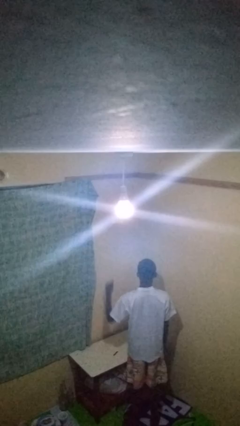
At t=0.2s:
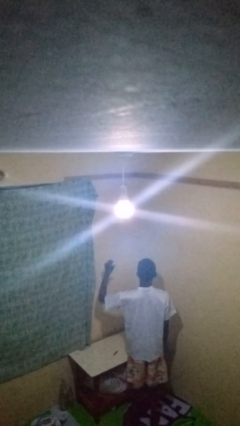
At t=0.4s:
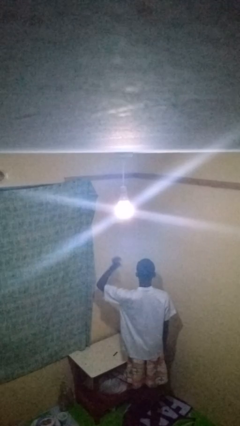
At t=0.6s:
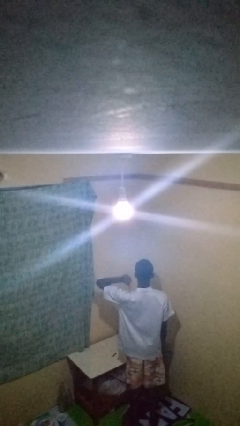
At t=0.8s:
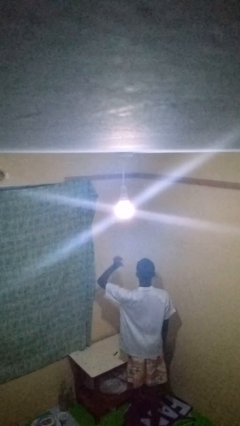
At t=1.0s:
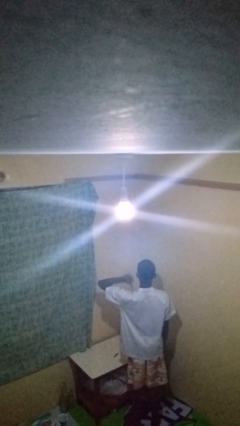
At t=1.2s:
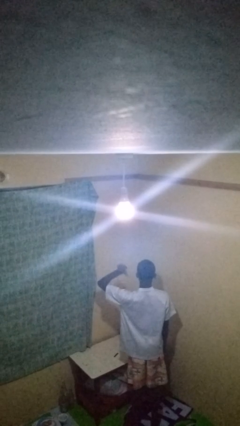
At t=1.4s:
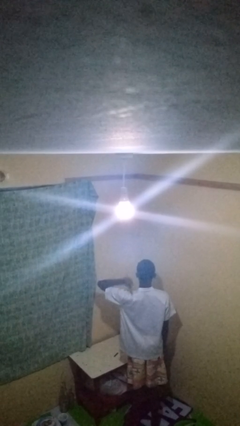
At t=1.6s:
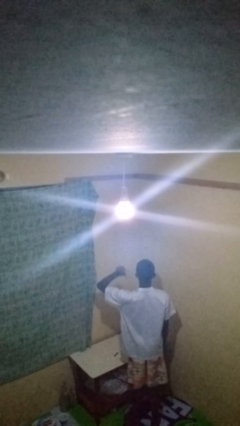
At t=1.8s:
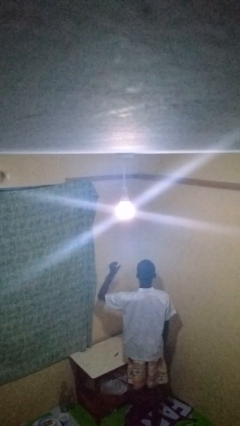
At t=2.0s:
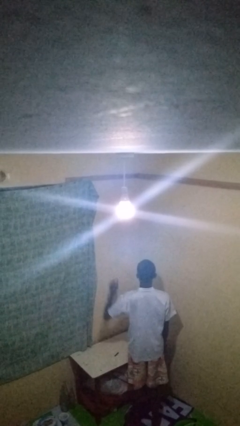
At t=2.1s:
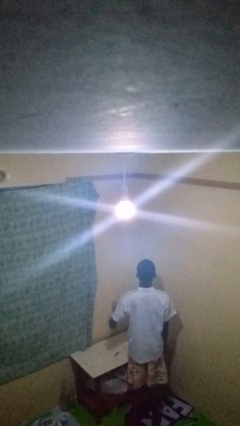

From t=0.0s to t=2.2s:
person gestures behind me

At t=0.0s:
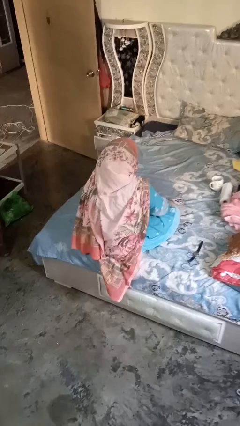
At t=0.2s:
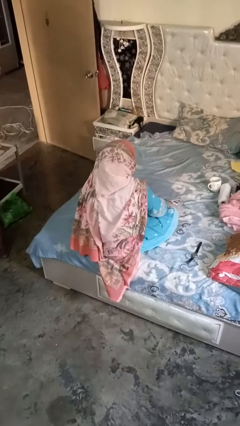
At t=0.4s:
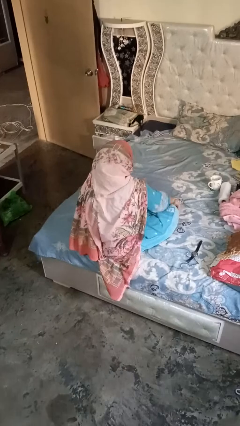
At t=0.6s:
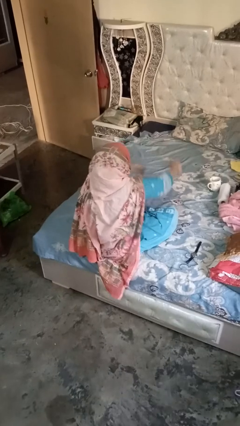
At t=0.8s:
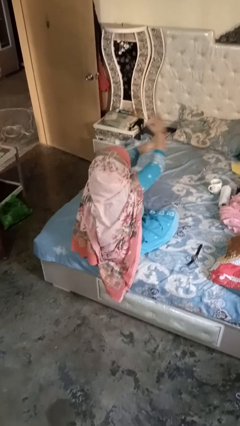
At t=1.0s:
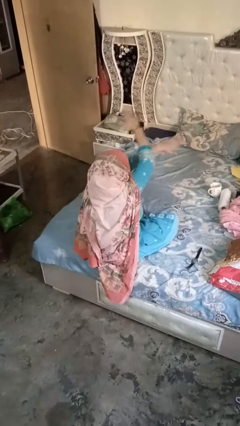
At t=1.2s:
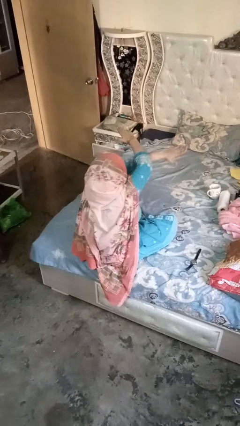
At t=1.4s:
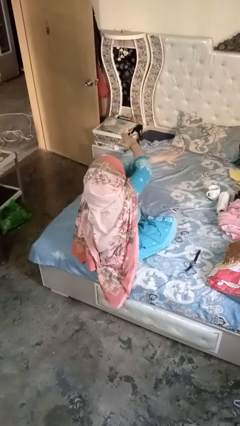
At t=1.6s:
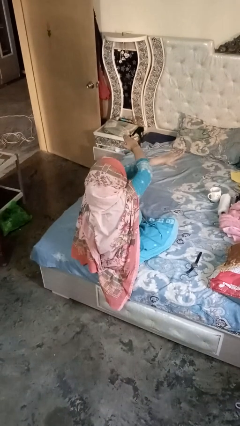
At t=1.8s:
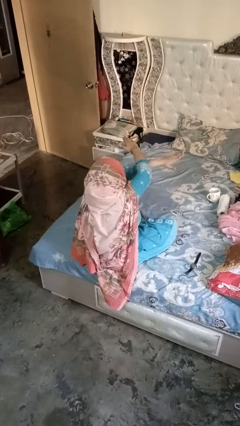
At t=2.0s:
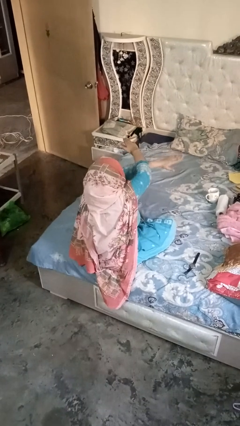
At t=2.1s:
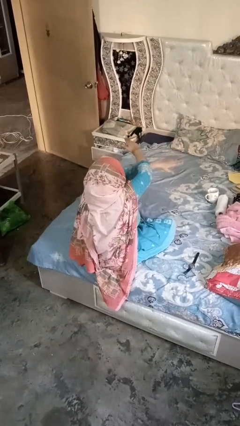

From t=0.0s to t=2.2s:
person gestures arms x

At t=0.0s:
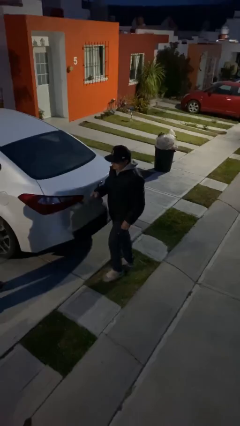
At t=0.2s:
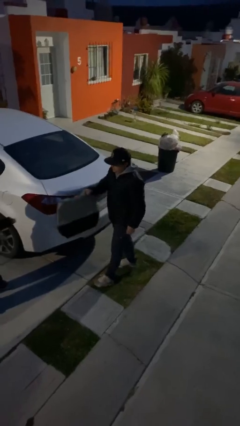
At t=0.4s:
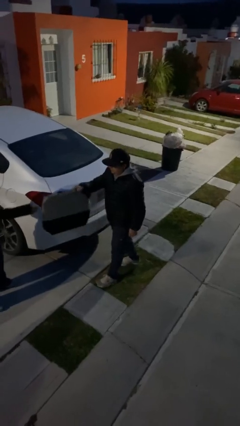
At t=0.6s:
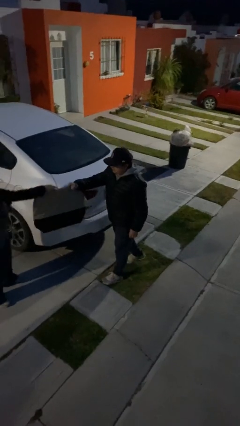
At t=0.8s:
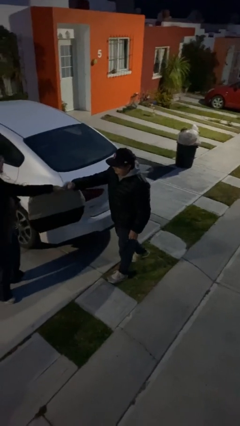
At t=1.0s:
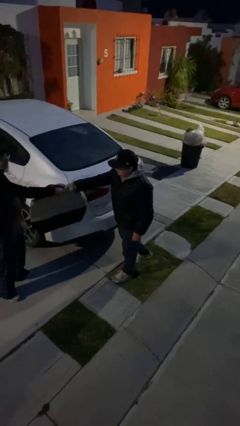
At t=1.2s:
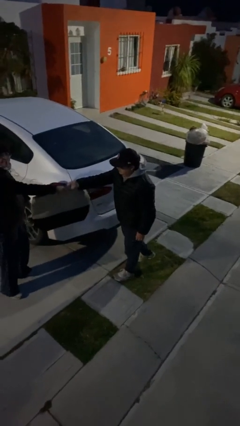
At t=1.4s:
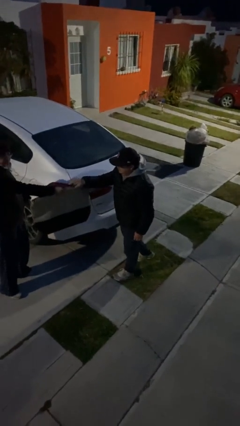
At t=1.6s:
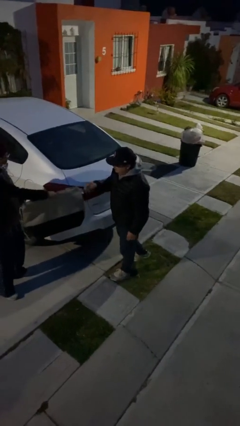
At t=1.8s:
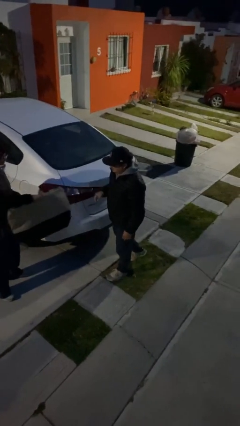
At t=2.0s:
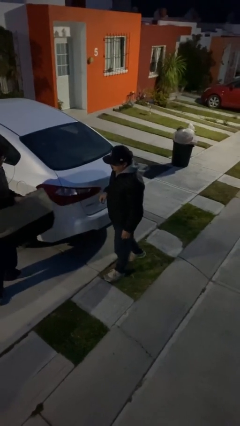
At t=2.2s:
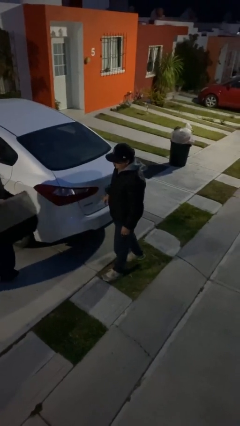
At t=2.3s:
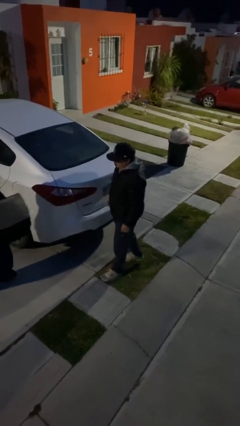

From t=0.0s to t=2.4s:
person transfers object to person

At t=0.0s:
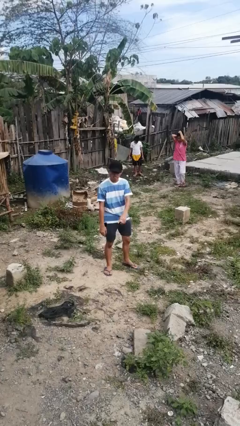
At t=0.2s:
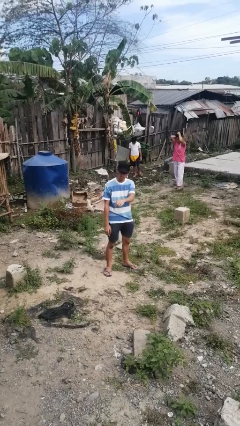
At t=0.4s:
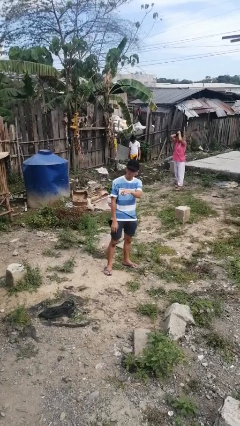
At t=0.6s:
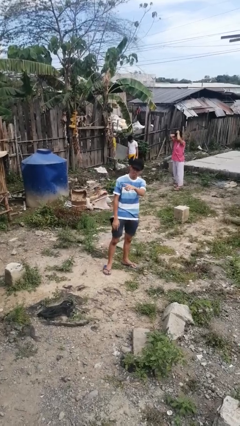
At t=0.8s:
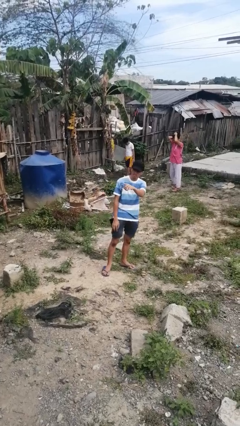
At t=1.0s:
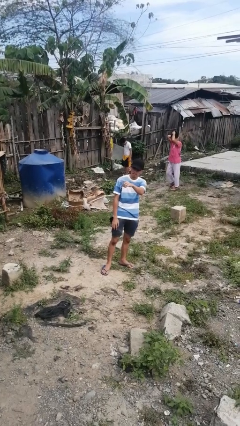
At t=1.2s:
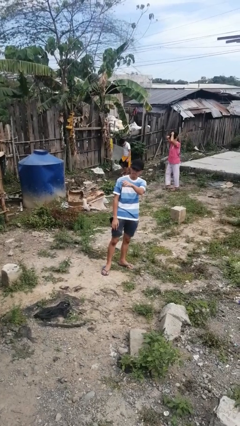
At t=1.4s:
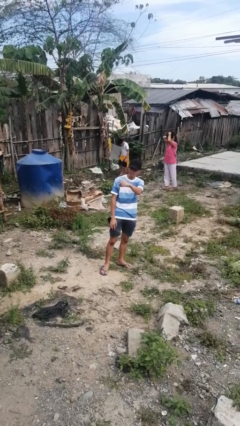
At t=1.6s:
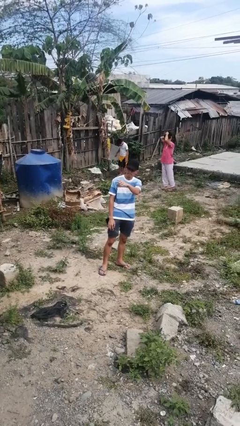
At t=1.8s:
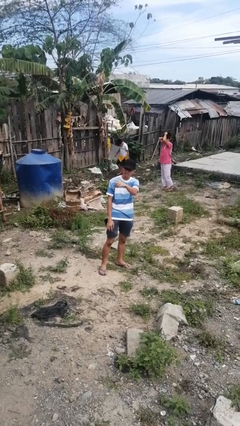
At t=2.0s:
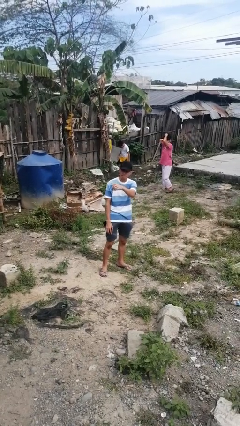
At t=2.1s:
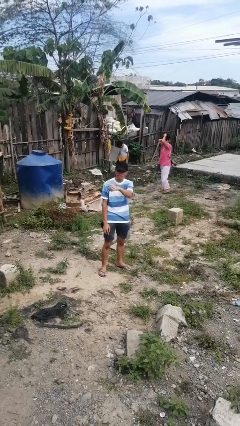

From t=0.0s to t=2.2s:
person points at person

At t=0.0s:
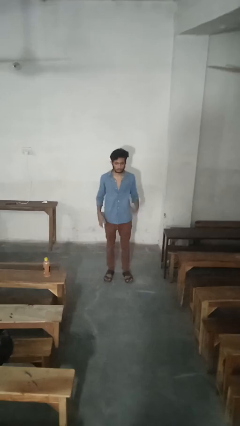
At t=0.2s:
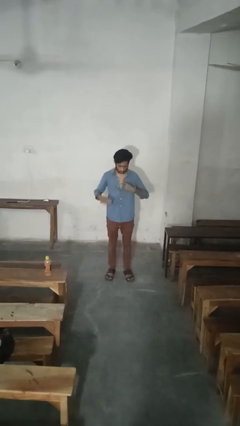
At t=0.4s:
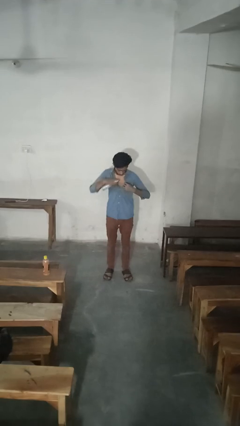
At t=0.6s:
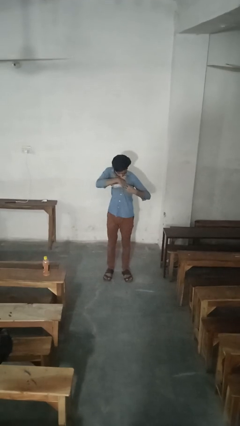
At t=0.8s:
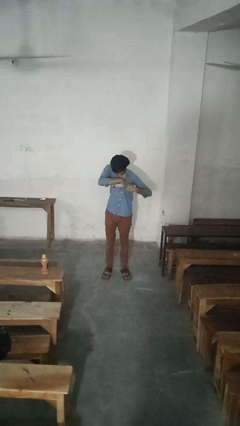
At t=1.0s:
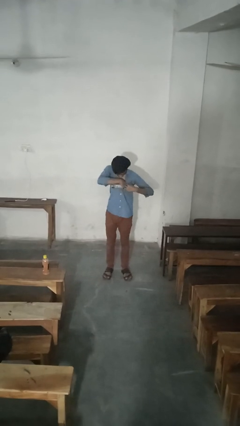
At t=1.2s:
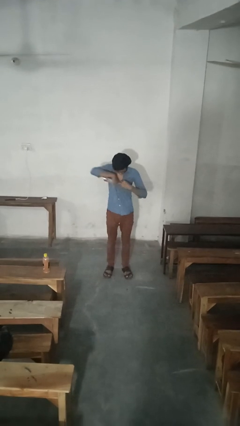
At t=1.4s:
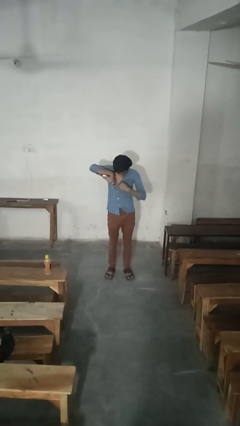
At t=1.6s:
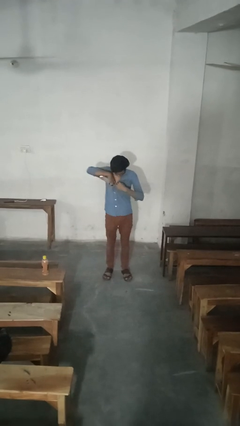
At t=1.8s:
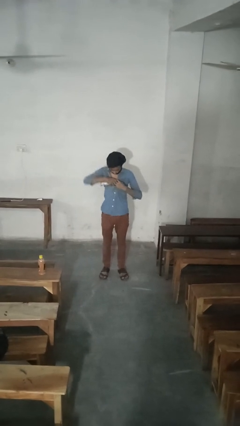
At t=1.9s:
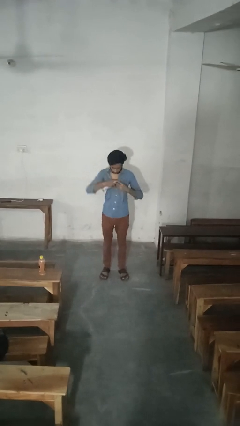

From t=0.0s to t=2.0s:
person applies deodorant

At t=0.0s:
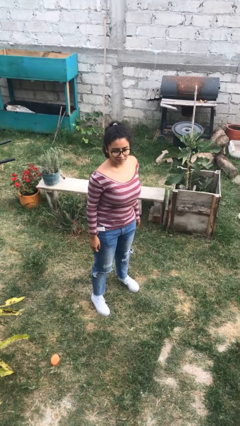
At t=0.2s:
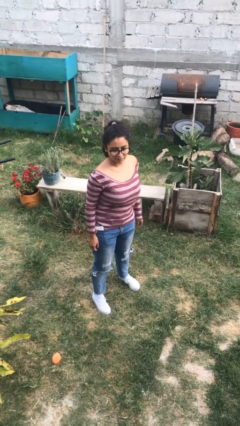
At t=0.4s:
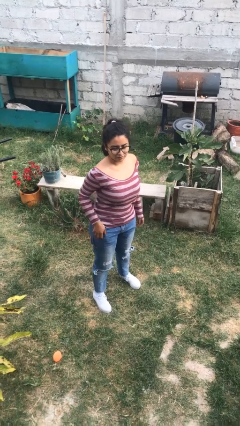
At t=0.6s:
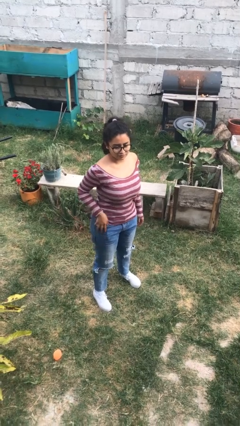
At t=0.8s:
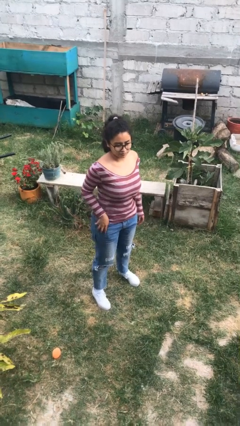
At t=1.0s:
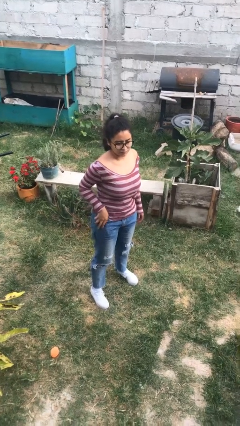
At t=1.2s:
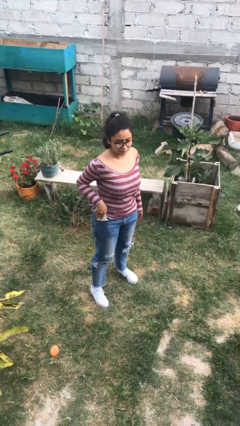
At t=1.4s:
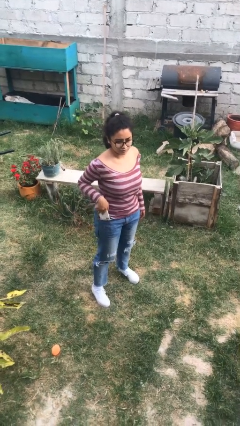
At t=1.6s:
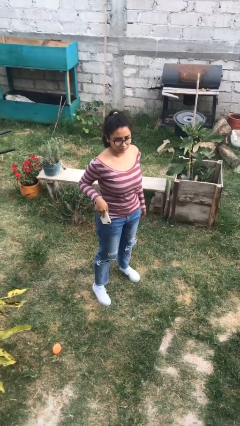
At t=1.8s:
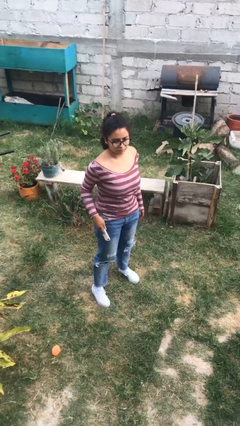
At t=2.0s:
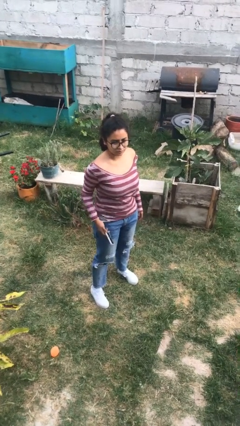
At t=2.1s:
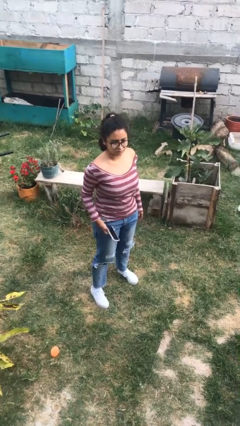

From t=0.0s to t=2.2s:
person takes phone from pocket

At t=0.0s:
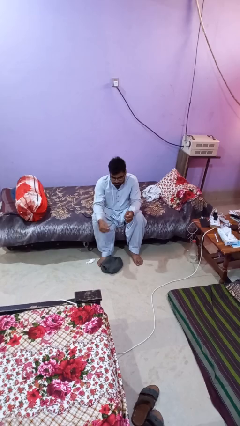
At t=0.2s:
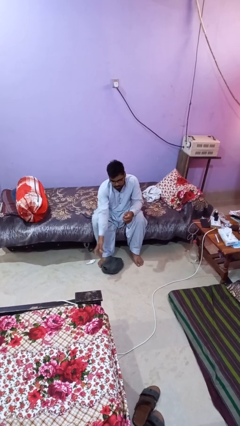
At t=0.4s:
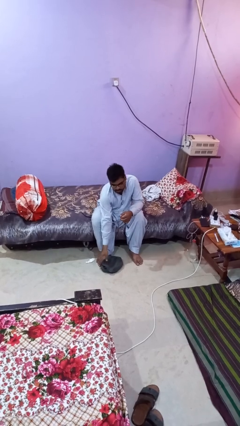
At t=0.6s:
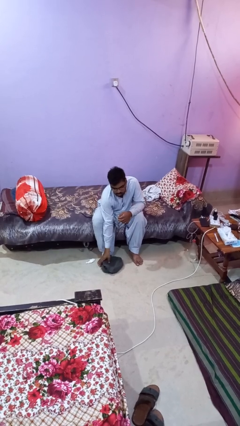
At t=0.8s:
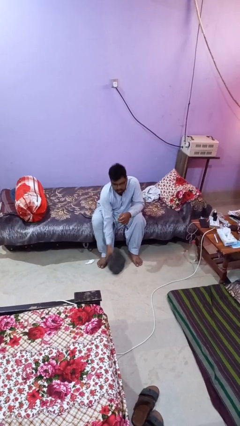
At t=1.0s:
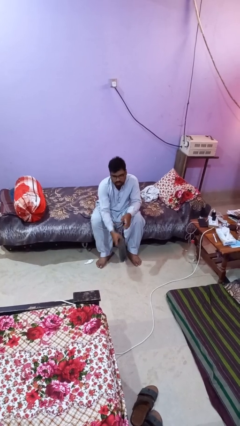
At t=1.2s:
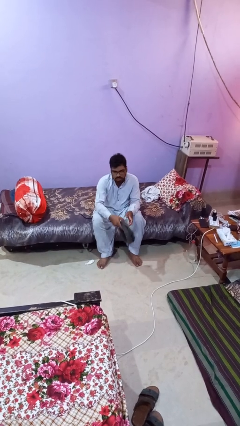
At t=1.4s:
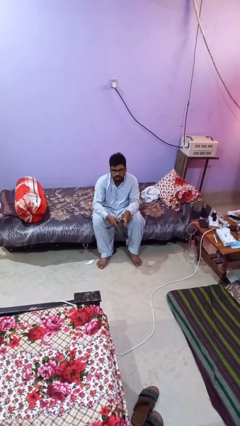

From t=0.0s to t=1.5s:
person picks up object from floor

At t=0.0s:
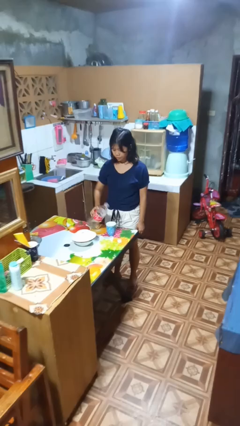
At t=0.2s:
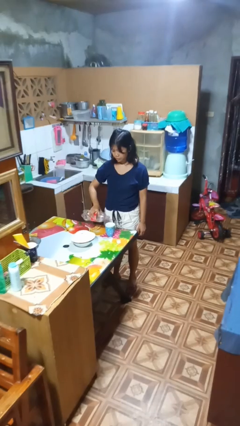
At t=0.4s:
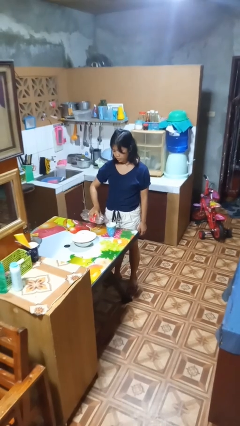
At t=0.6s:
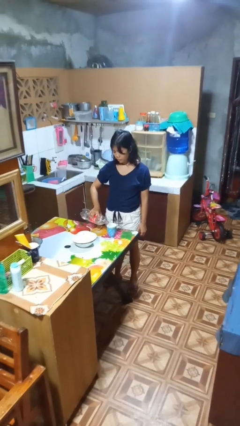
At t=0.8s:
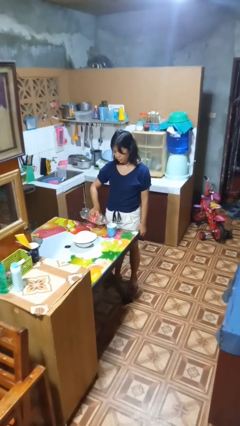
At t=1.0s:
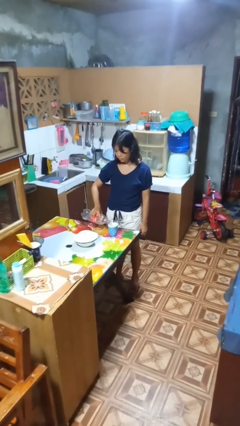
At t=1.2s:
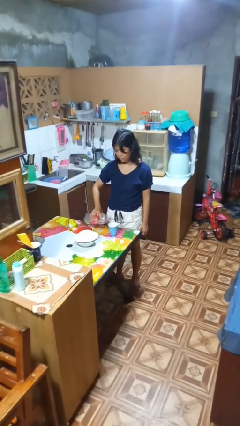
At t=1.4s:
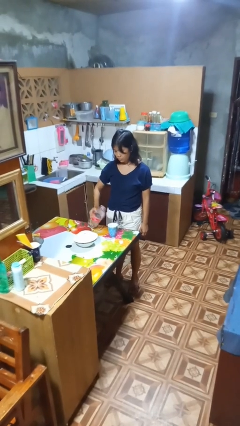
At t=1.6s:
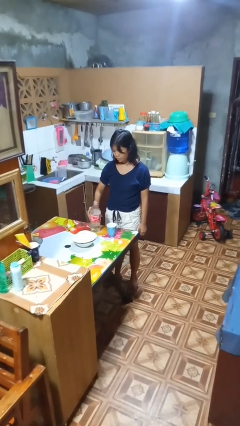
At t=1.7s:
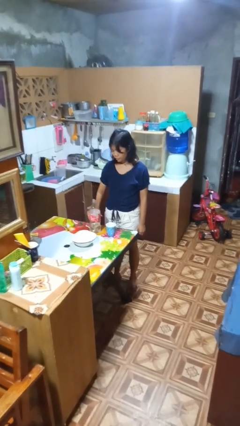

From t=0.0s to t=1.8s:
person pours liquid into cup

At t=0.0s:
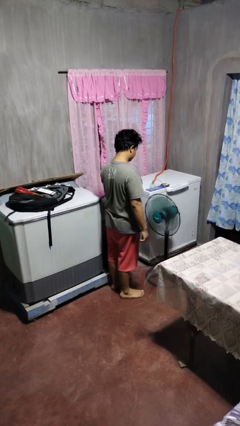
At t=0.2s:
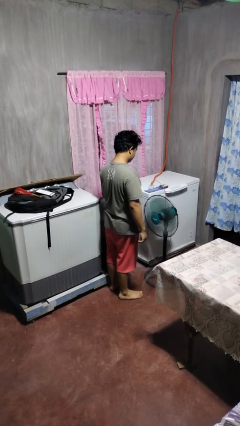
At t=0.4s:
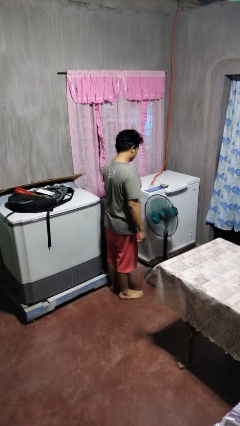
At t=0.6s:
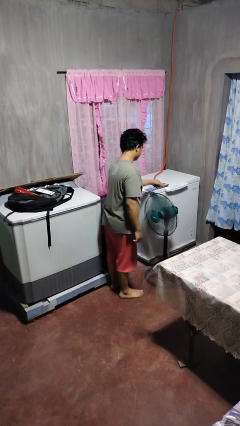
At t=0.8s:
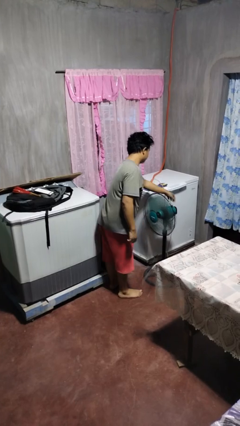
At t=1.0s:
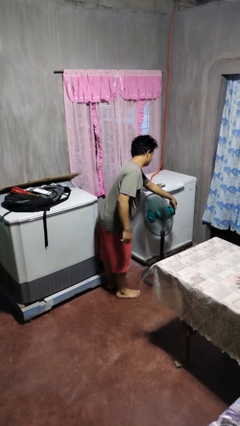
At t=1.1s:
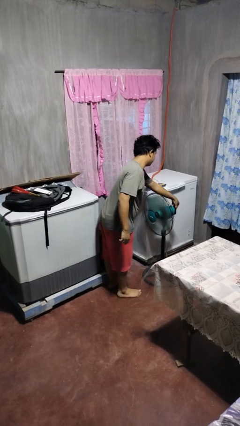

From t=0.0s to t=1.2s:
person turns off fan
